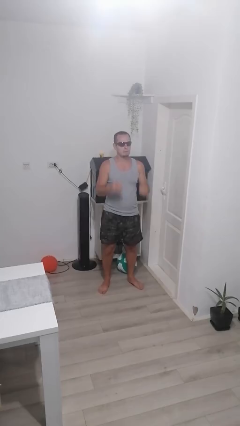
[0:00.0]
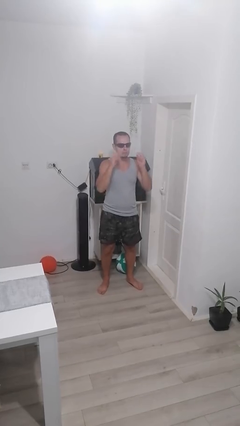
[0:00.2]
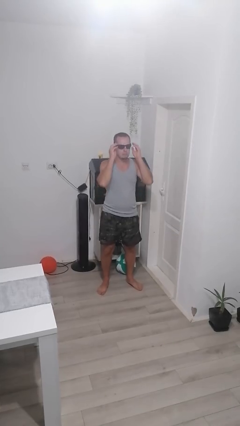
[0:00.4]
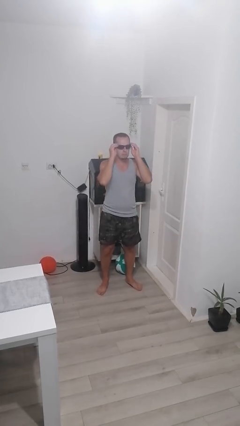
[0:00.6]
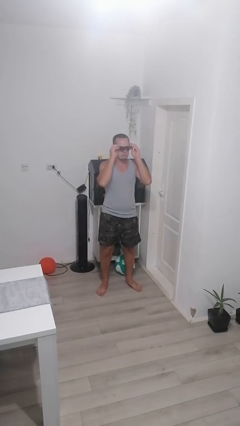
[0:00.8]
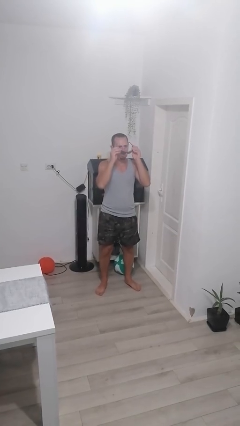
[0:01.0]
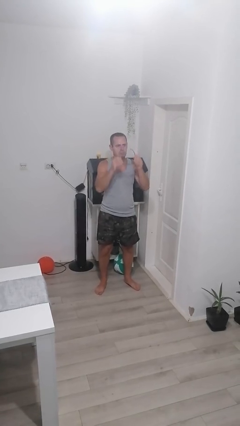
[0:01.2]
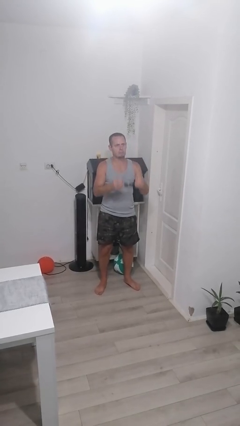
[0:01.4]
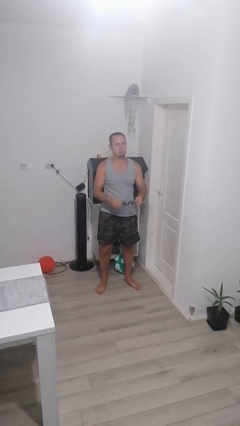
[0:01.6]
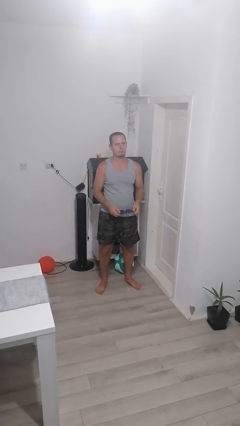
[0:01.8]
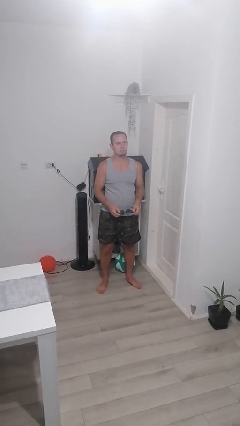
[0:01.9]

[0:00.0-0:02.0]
person takes off sunglasses

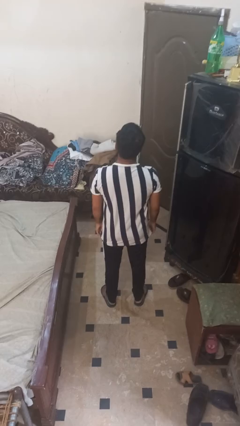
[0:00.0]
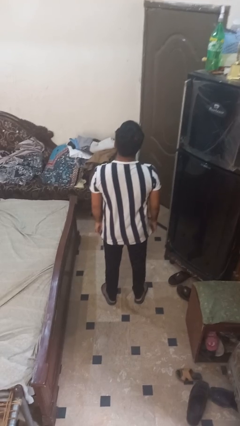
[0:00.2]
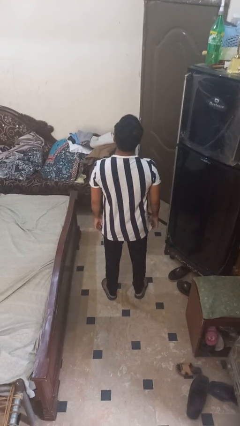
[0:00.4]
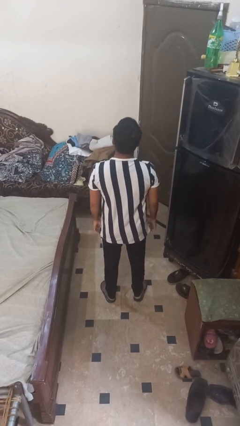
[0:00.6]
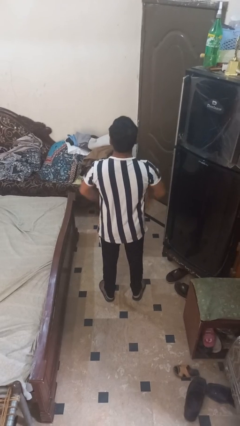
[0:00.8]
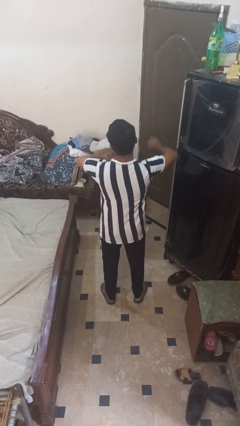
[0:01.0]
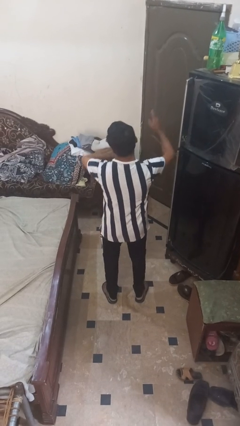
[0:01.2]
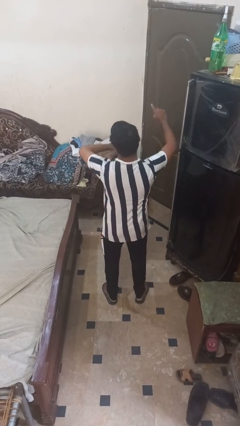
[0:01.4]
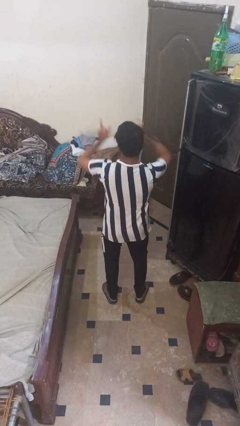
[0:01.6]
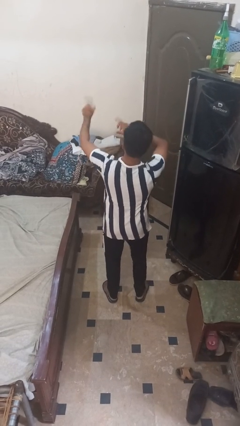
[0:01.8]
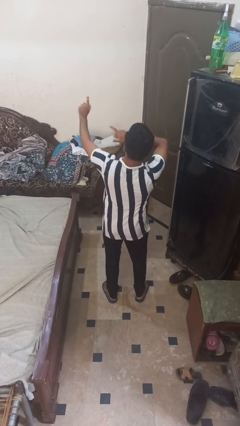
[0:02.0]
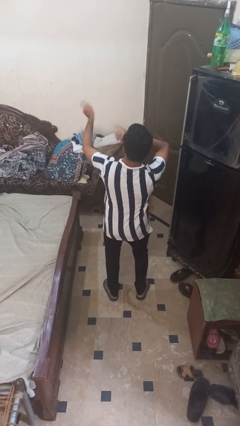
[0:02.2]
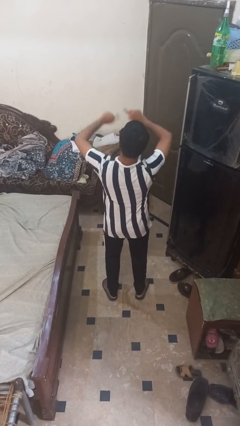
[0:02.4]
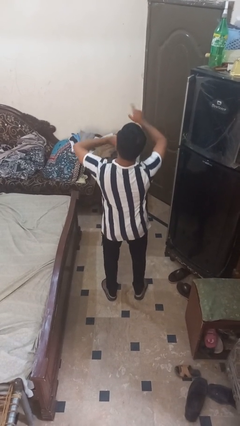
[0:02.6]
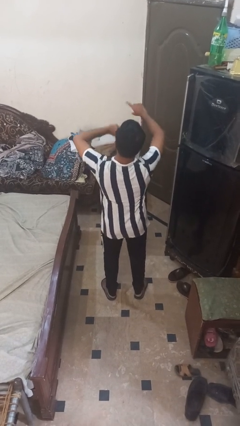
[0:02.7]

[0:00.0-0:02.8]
person dances in place

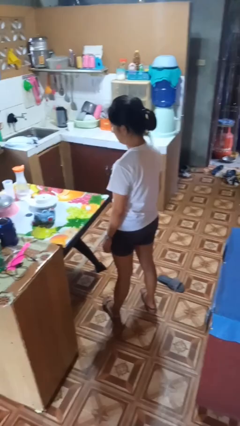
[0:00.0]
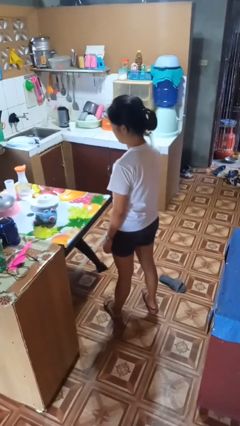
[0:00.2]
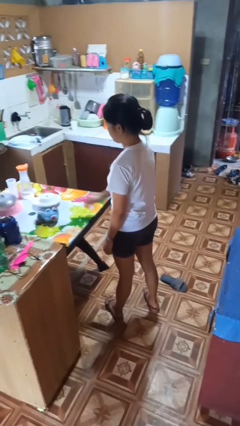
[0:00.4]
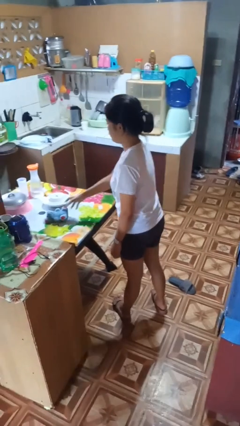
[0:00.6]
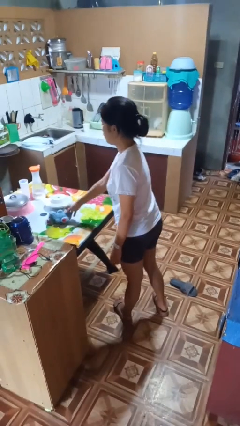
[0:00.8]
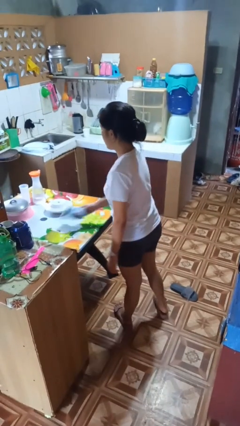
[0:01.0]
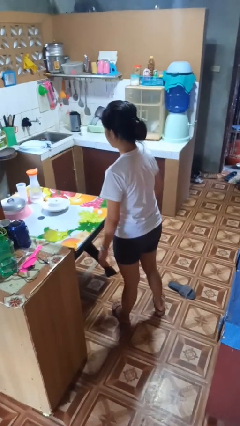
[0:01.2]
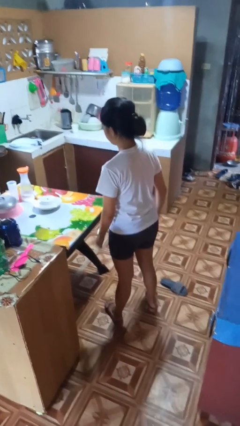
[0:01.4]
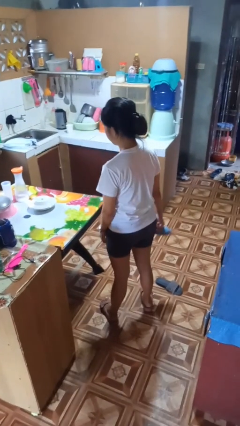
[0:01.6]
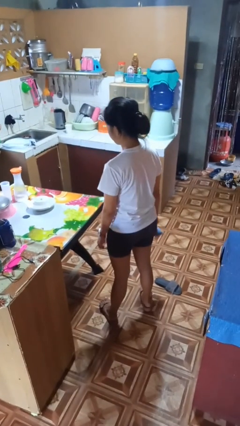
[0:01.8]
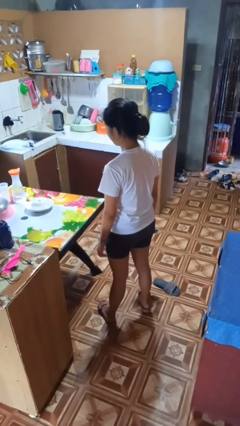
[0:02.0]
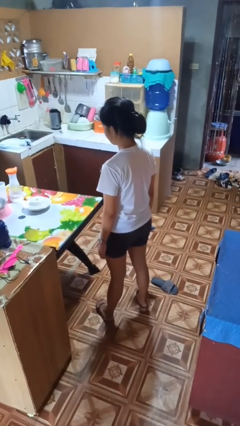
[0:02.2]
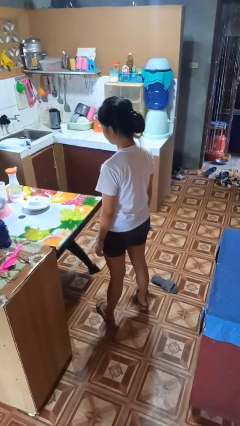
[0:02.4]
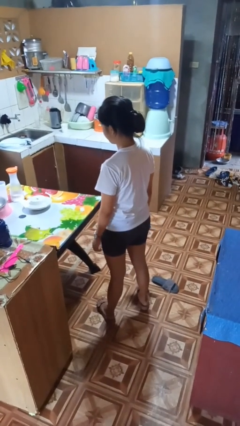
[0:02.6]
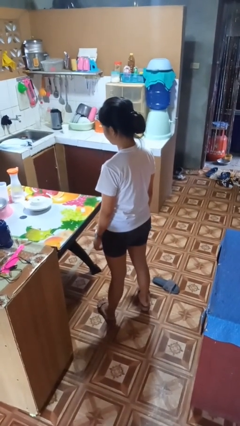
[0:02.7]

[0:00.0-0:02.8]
person picks up object from table

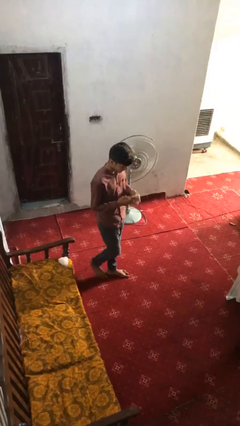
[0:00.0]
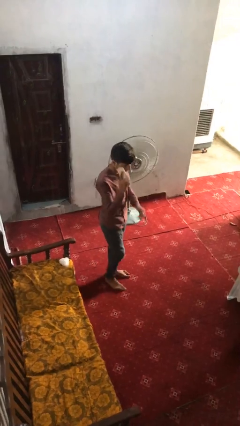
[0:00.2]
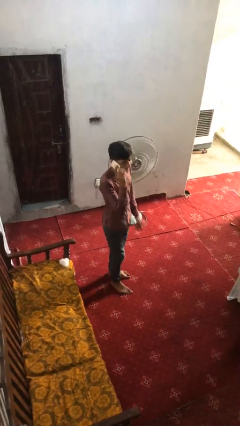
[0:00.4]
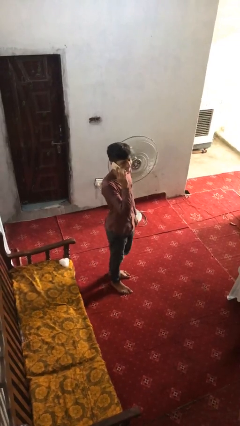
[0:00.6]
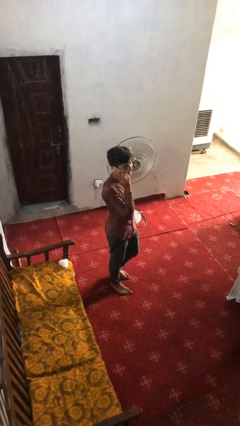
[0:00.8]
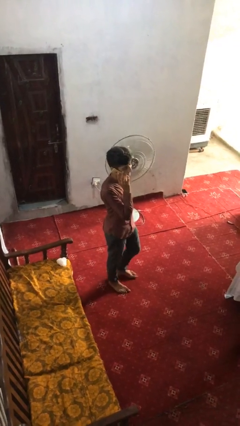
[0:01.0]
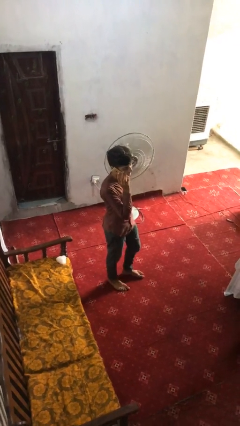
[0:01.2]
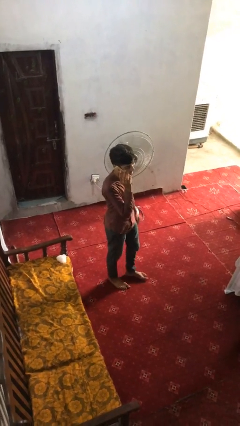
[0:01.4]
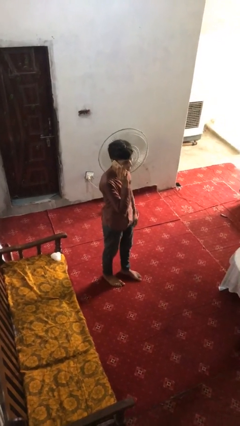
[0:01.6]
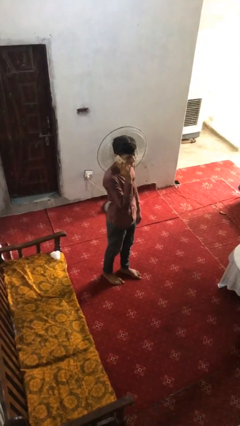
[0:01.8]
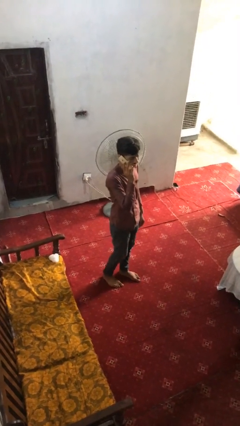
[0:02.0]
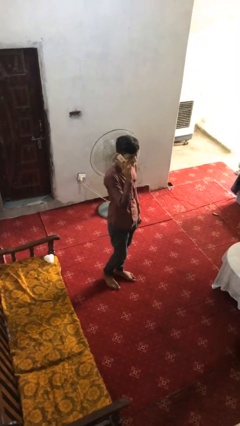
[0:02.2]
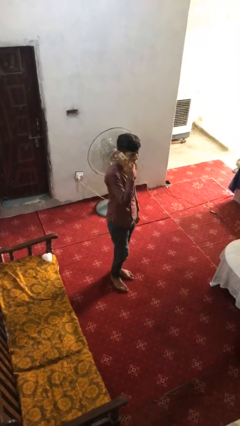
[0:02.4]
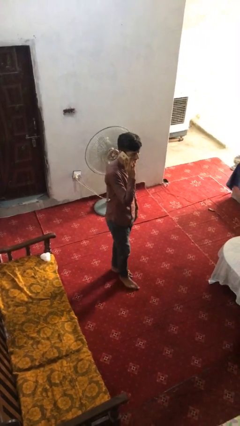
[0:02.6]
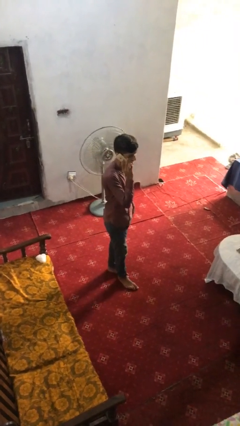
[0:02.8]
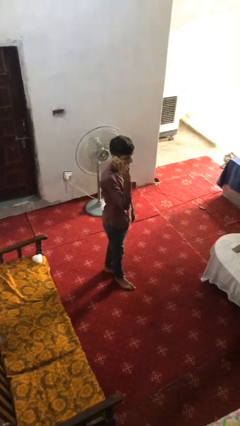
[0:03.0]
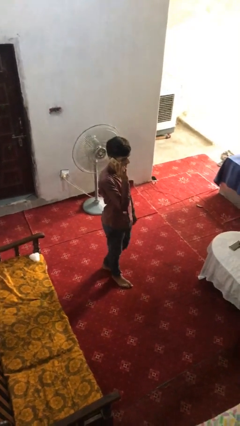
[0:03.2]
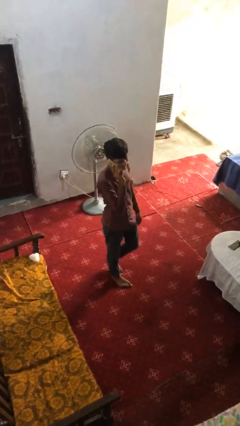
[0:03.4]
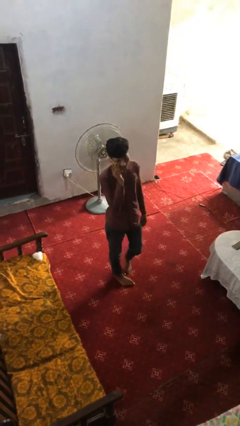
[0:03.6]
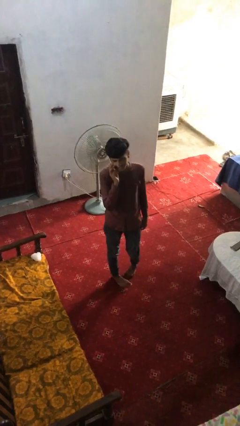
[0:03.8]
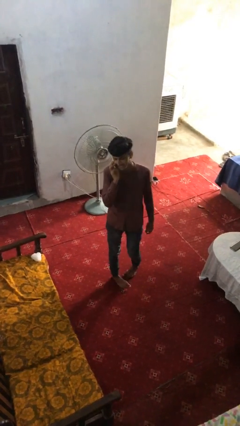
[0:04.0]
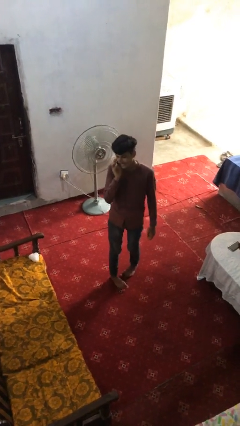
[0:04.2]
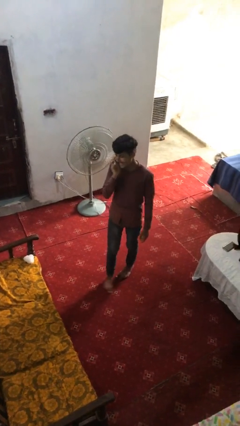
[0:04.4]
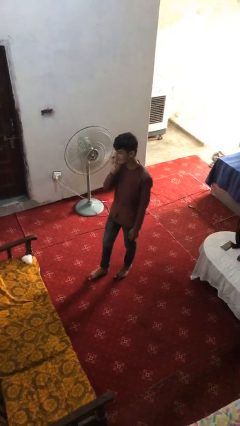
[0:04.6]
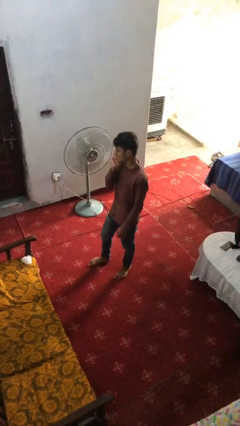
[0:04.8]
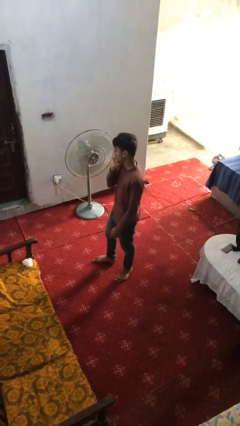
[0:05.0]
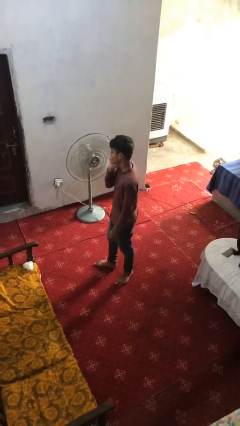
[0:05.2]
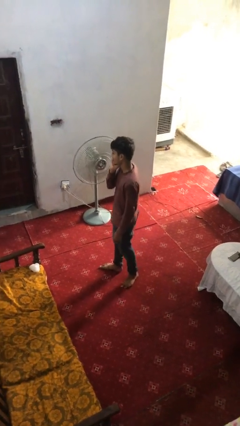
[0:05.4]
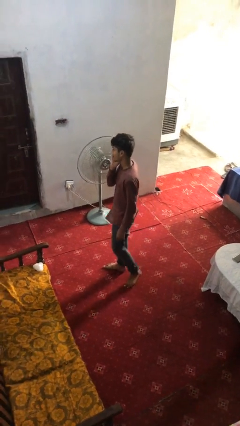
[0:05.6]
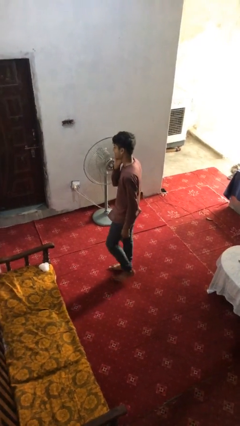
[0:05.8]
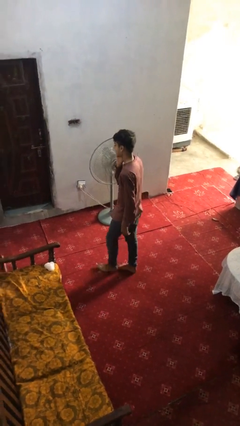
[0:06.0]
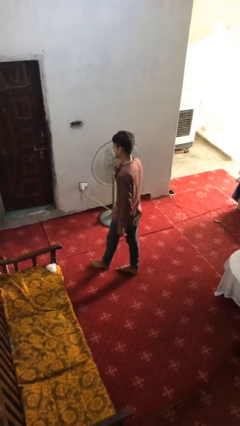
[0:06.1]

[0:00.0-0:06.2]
person talks on phone

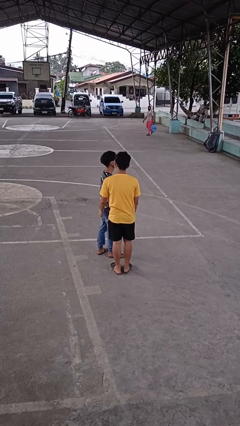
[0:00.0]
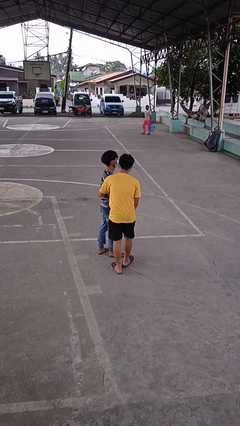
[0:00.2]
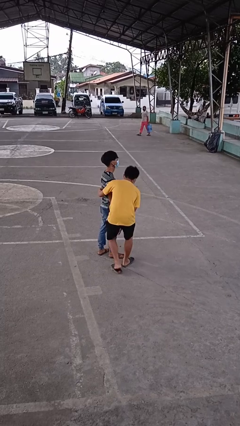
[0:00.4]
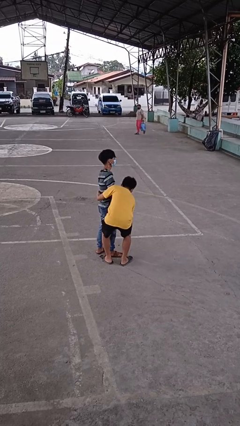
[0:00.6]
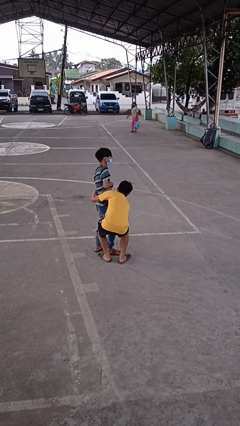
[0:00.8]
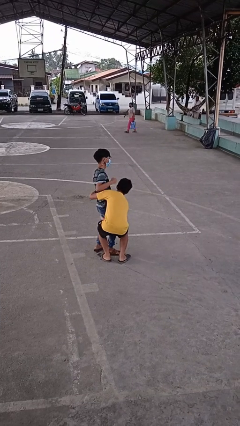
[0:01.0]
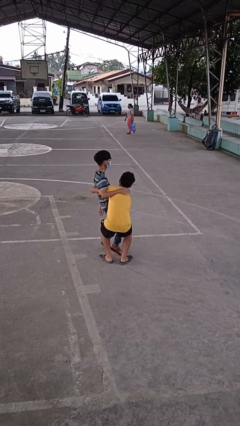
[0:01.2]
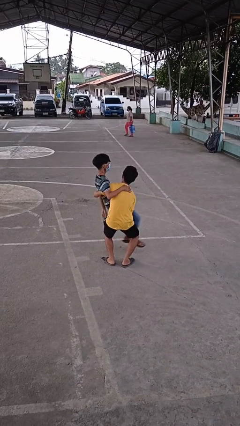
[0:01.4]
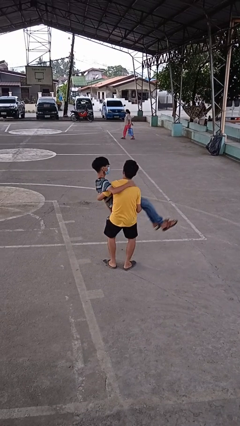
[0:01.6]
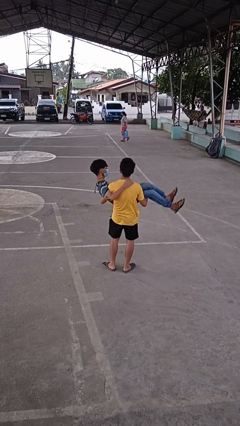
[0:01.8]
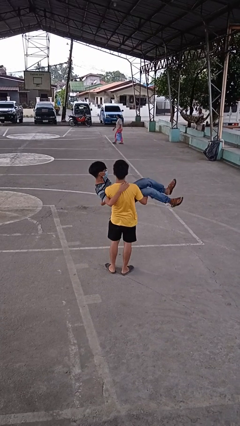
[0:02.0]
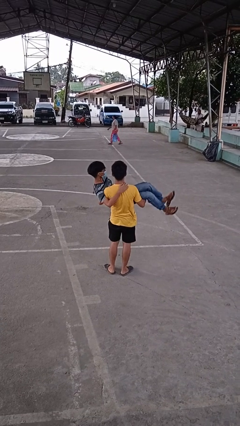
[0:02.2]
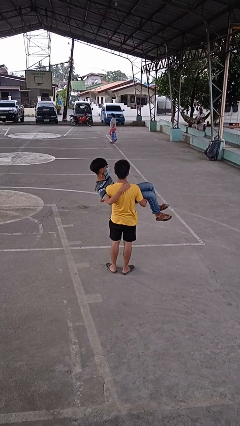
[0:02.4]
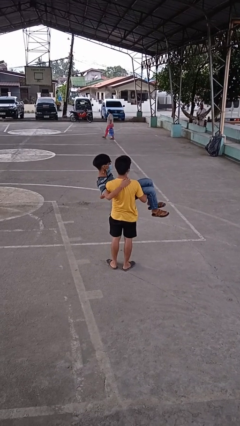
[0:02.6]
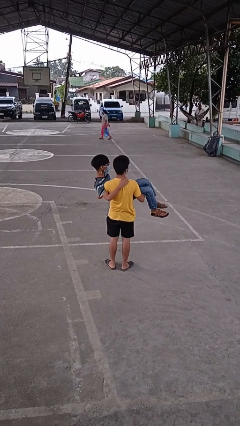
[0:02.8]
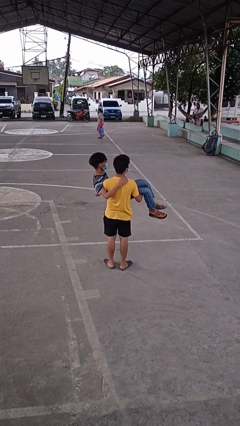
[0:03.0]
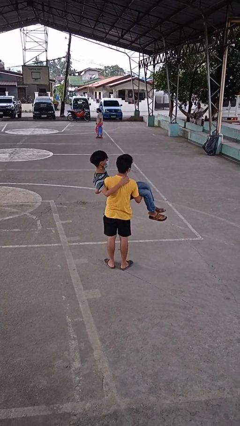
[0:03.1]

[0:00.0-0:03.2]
person picks up person

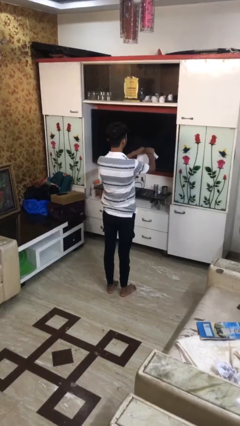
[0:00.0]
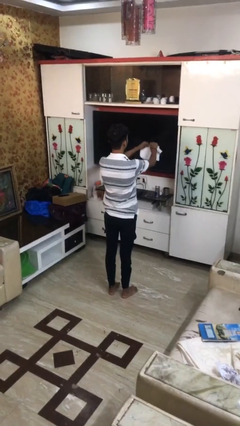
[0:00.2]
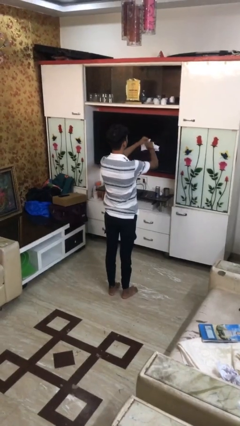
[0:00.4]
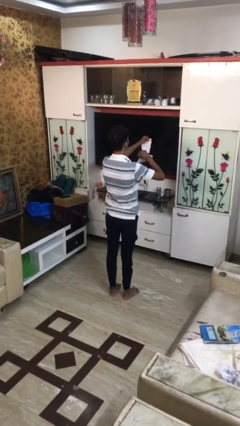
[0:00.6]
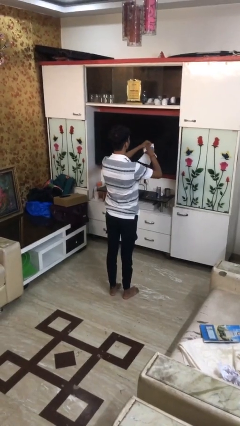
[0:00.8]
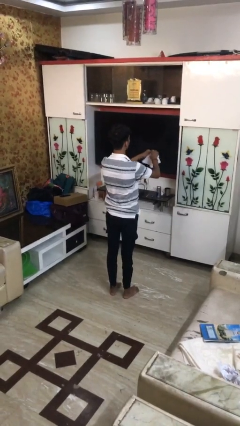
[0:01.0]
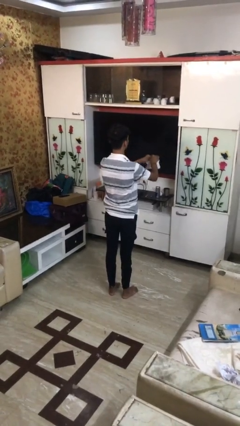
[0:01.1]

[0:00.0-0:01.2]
person tears paper
